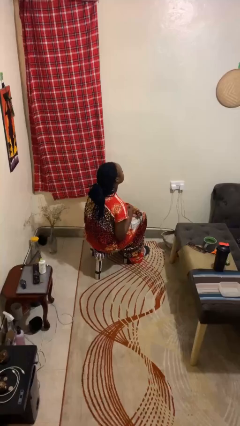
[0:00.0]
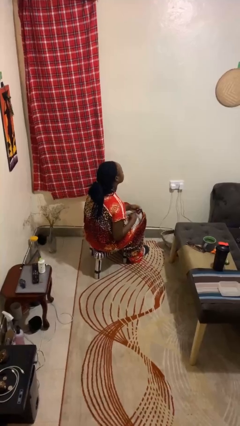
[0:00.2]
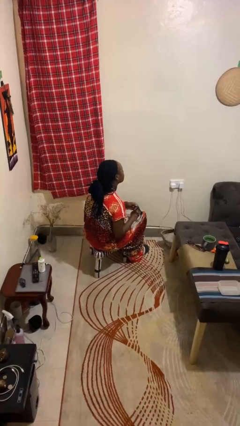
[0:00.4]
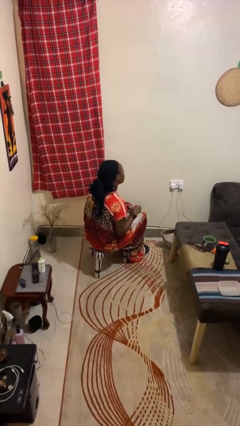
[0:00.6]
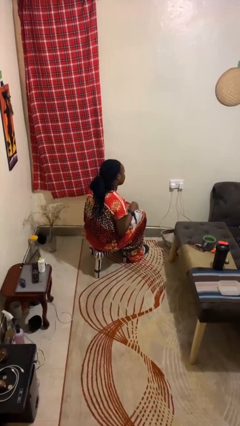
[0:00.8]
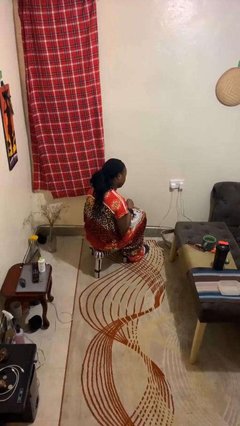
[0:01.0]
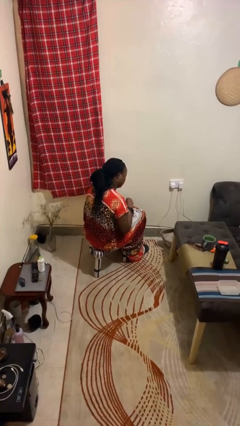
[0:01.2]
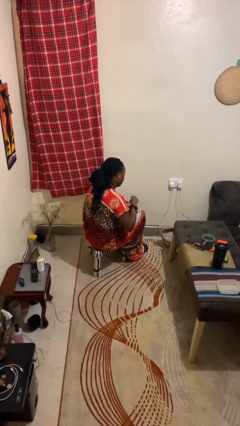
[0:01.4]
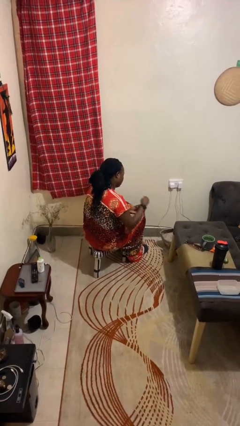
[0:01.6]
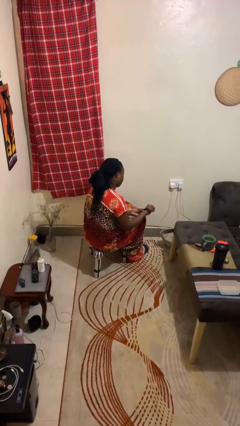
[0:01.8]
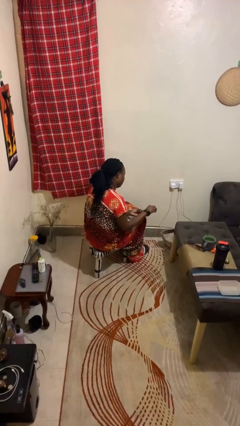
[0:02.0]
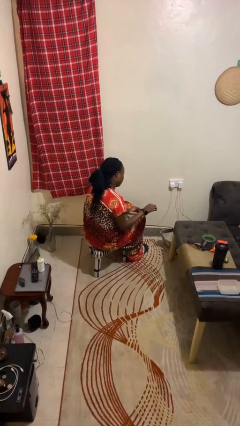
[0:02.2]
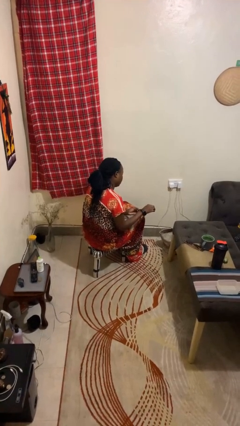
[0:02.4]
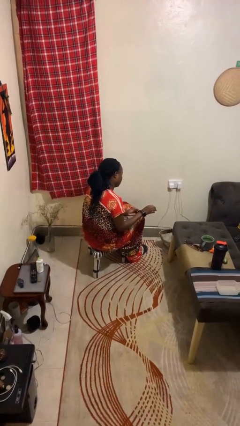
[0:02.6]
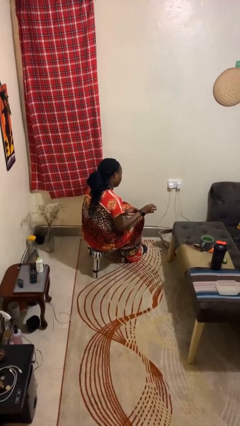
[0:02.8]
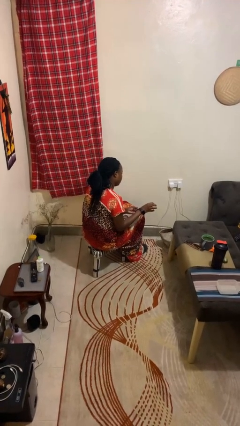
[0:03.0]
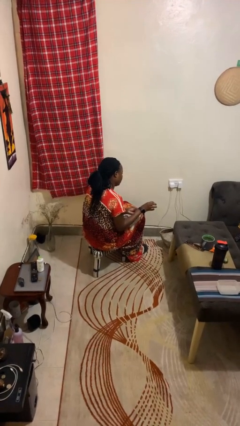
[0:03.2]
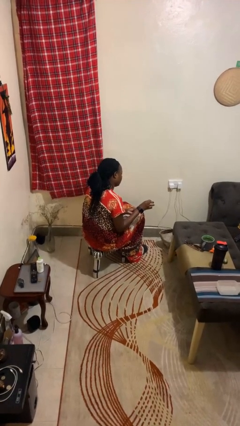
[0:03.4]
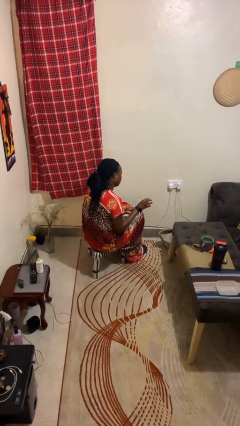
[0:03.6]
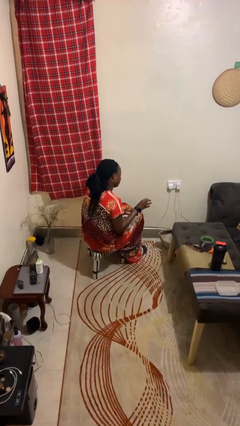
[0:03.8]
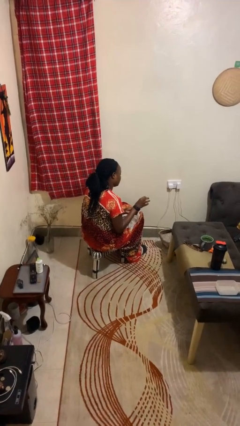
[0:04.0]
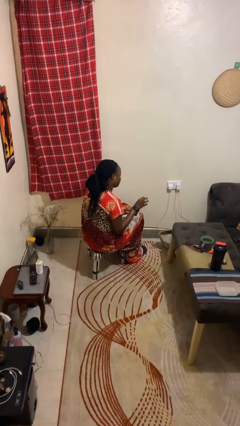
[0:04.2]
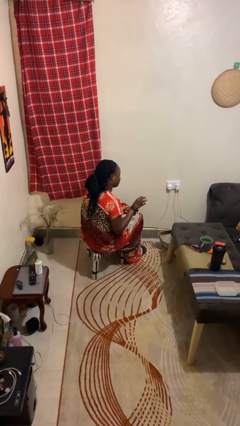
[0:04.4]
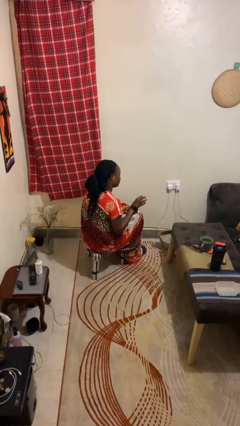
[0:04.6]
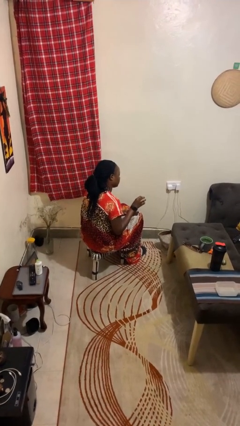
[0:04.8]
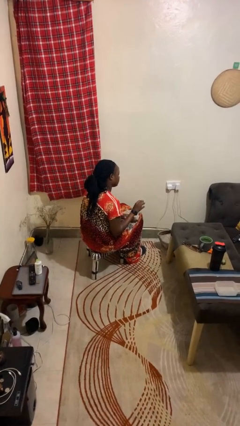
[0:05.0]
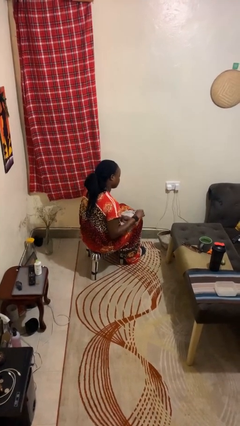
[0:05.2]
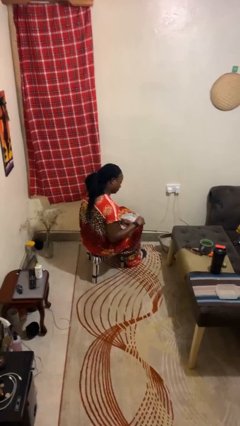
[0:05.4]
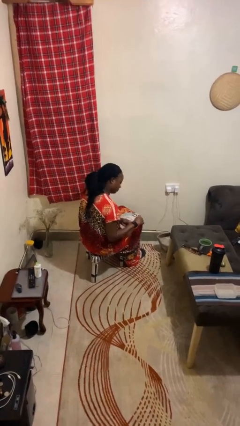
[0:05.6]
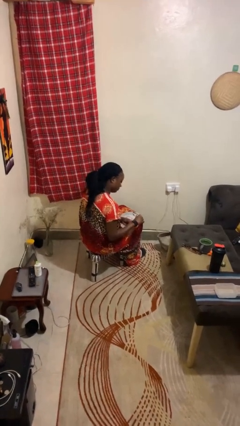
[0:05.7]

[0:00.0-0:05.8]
person puts on wristwatch

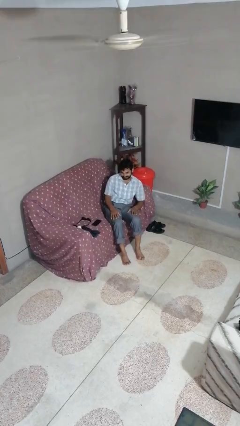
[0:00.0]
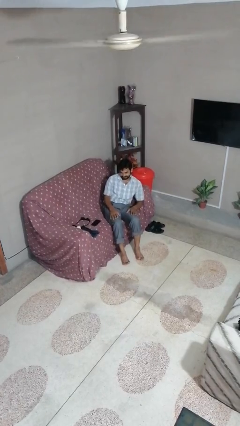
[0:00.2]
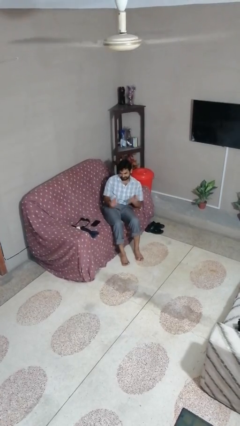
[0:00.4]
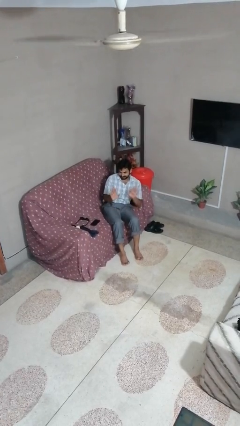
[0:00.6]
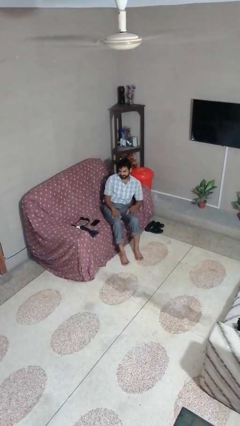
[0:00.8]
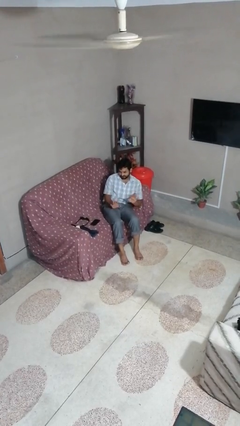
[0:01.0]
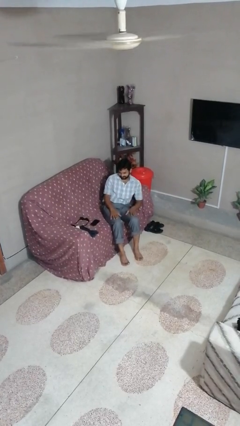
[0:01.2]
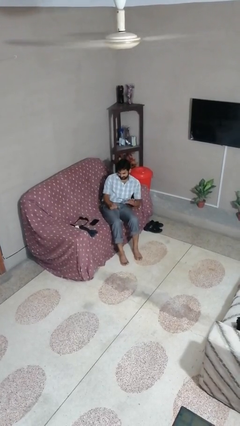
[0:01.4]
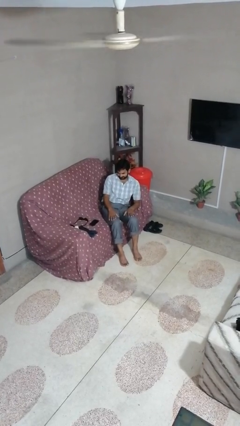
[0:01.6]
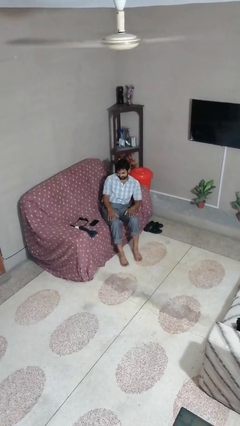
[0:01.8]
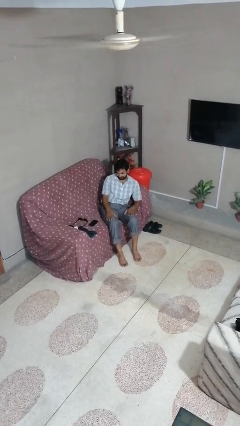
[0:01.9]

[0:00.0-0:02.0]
person slaps hands on thighs

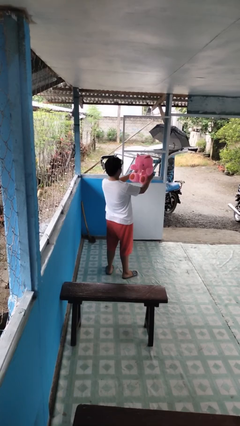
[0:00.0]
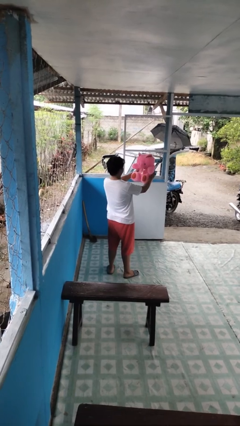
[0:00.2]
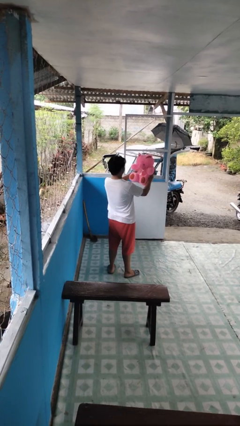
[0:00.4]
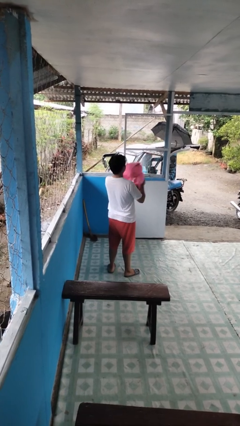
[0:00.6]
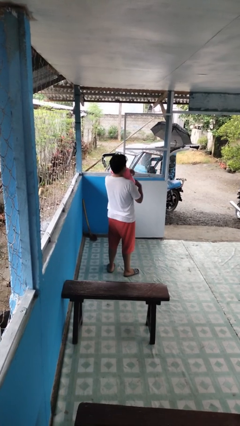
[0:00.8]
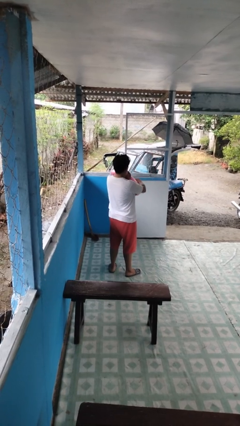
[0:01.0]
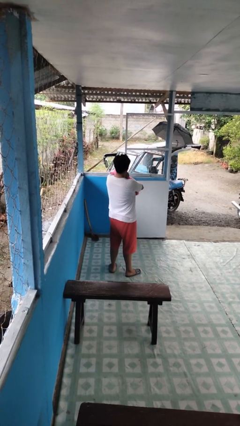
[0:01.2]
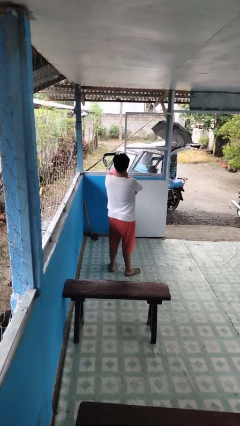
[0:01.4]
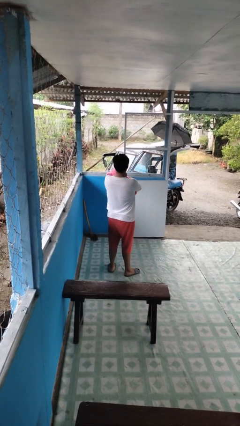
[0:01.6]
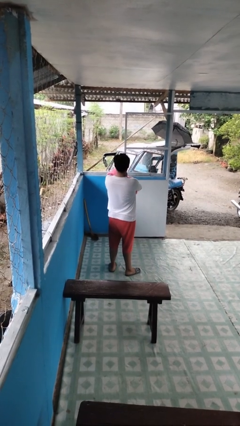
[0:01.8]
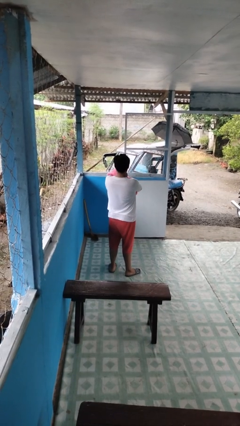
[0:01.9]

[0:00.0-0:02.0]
person hugs stuffed animal

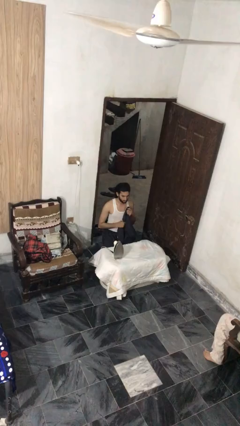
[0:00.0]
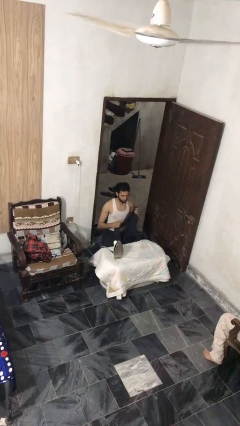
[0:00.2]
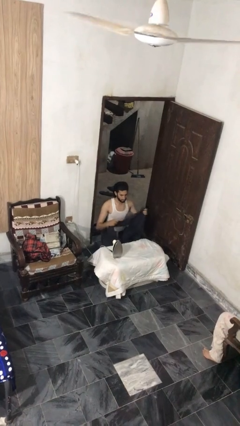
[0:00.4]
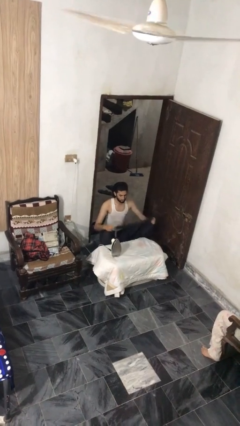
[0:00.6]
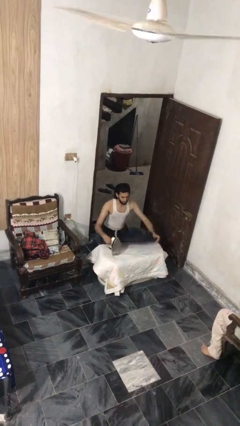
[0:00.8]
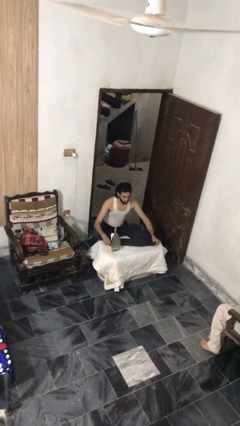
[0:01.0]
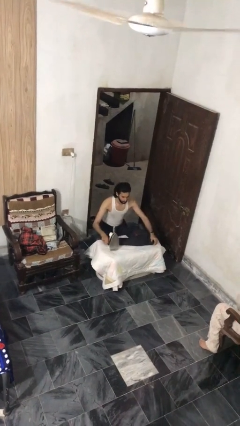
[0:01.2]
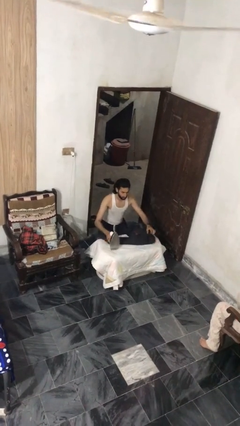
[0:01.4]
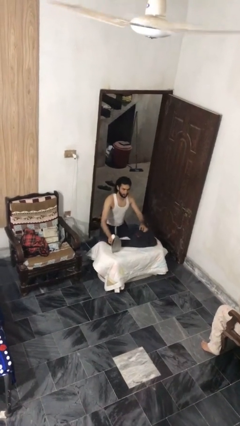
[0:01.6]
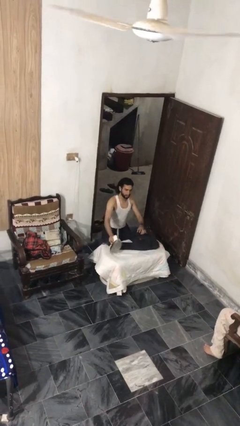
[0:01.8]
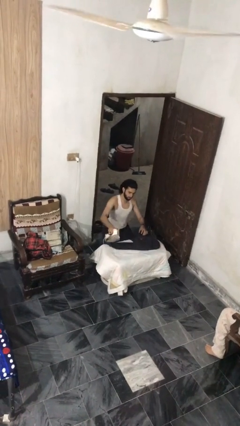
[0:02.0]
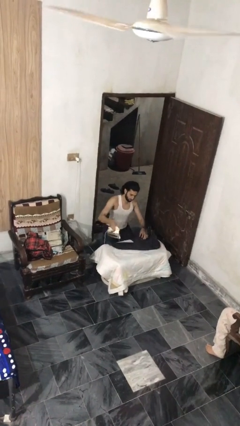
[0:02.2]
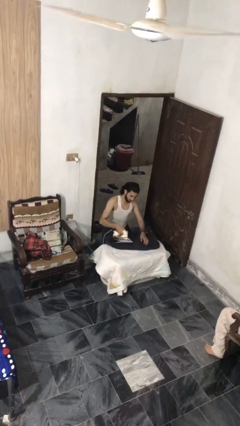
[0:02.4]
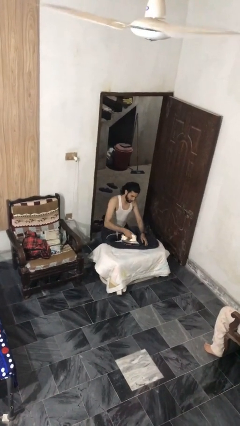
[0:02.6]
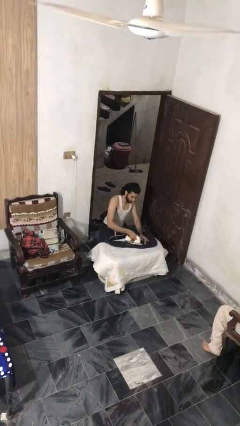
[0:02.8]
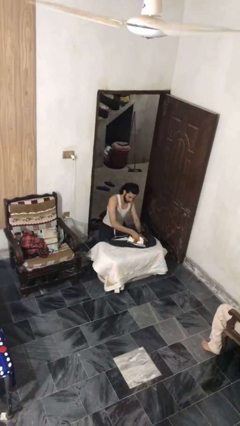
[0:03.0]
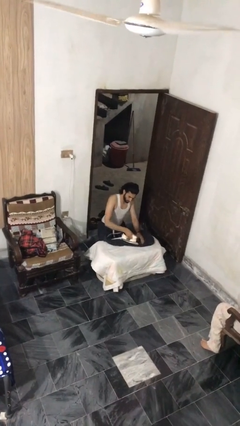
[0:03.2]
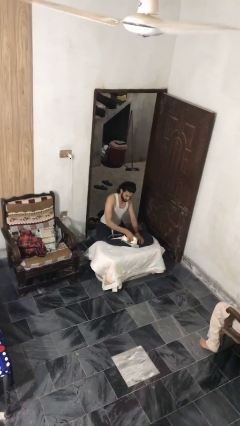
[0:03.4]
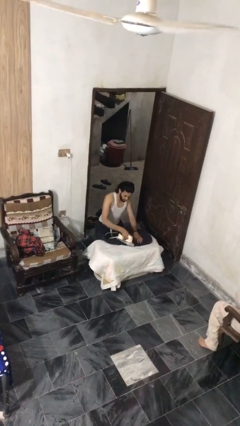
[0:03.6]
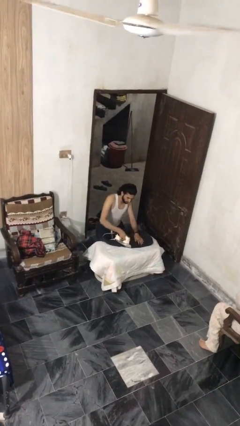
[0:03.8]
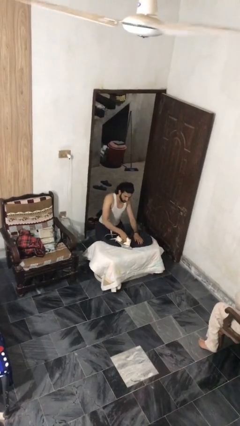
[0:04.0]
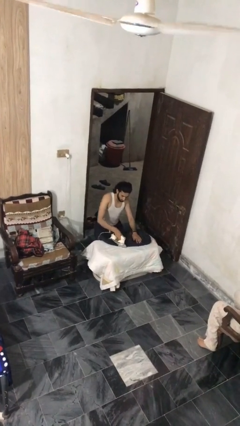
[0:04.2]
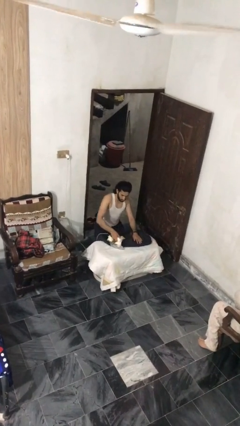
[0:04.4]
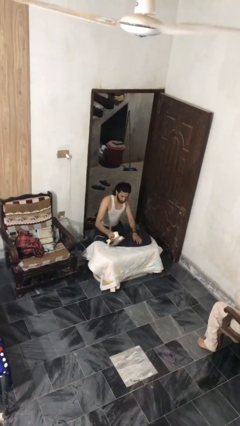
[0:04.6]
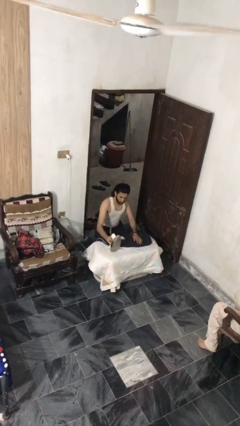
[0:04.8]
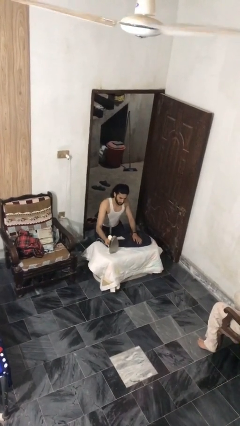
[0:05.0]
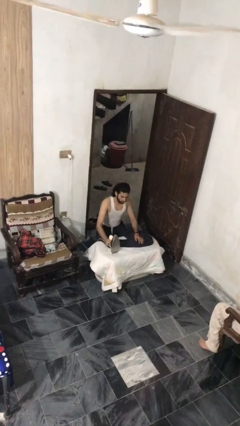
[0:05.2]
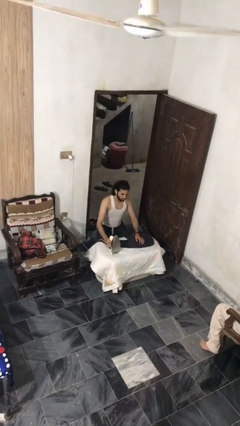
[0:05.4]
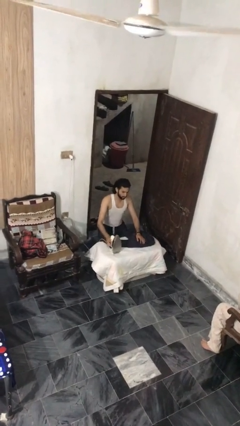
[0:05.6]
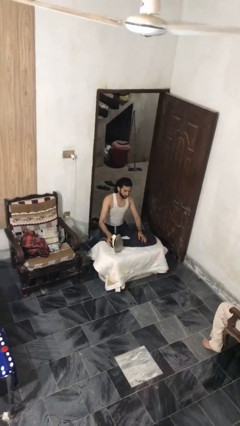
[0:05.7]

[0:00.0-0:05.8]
person irons clothes

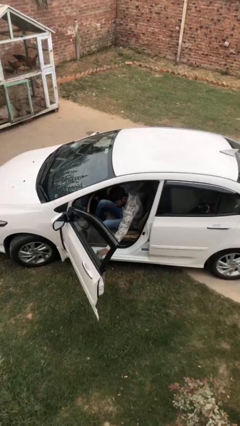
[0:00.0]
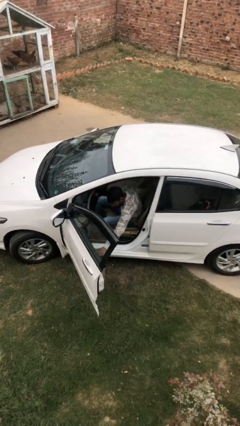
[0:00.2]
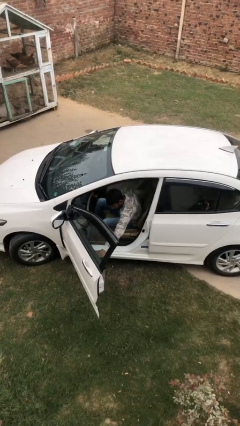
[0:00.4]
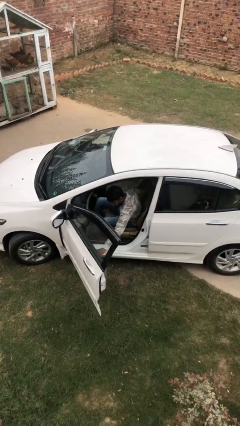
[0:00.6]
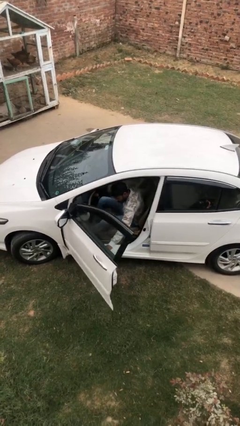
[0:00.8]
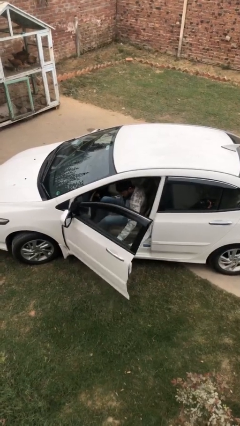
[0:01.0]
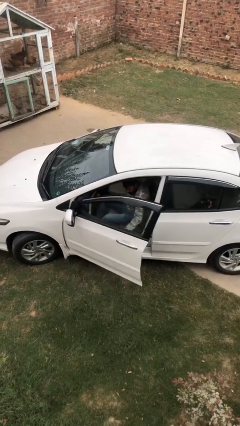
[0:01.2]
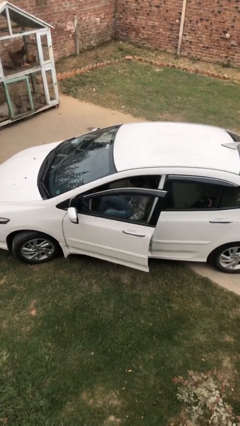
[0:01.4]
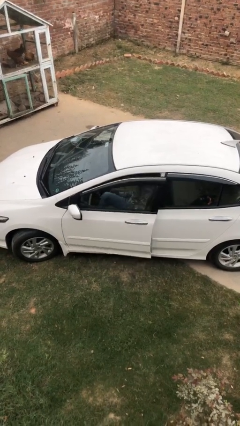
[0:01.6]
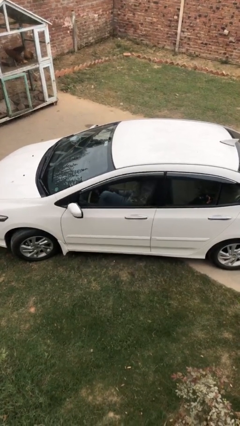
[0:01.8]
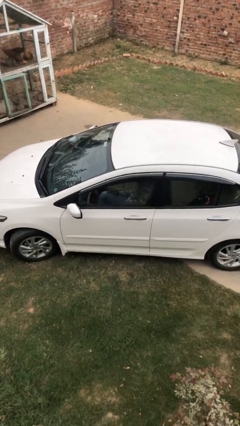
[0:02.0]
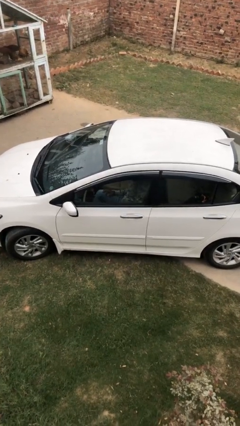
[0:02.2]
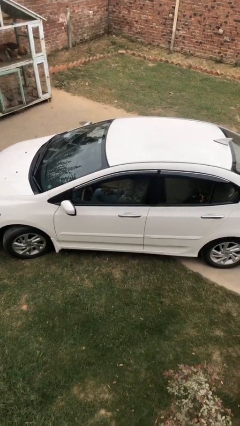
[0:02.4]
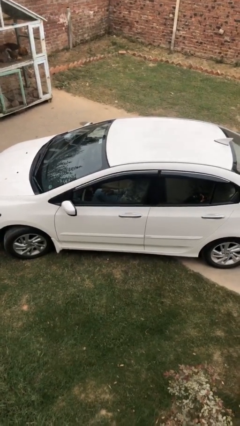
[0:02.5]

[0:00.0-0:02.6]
person closes car door
